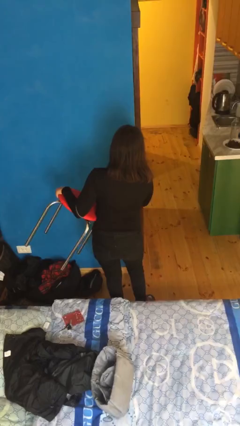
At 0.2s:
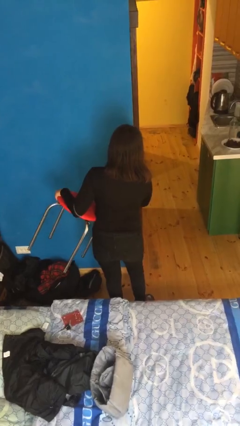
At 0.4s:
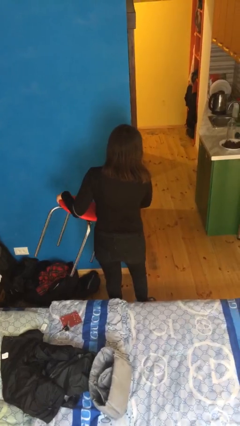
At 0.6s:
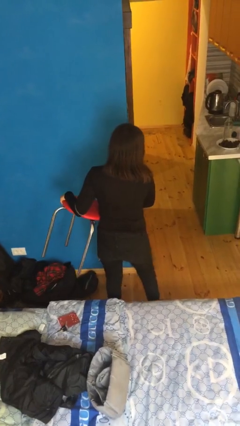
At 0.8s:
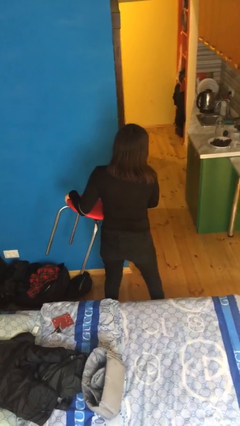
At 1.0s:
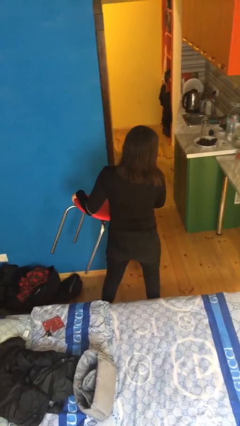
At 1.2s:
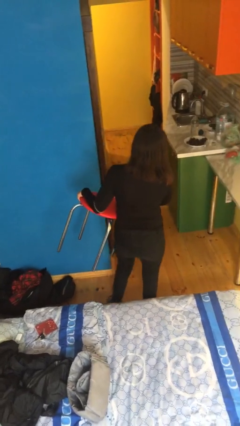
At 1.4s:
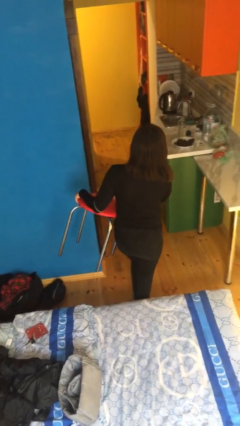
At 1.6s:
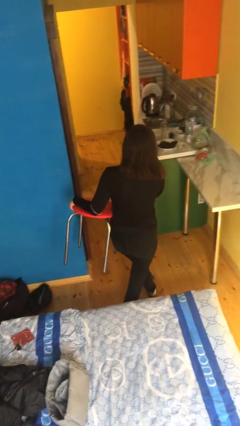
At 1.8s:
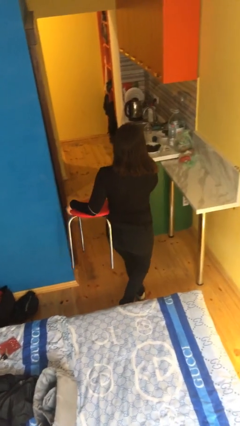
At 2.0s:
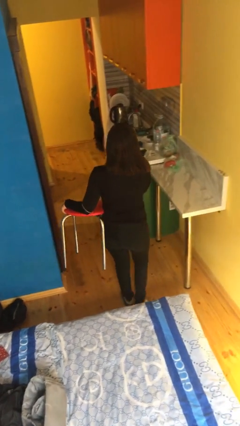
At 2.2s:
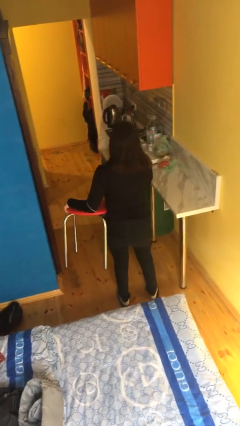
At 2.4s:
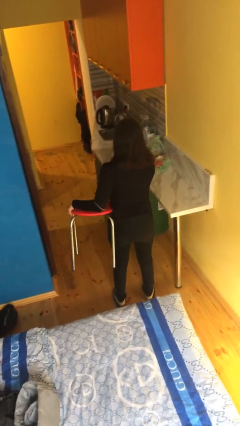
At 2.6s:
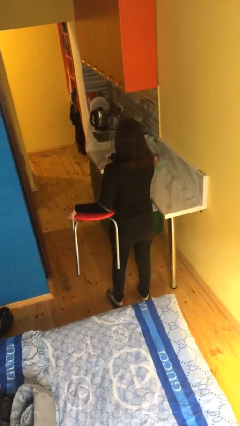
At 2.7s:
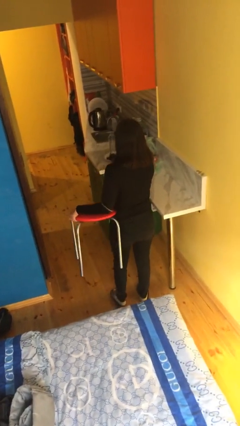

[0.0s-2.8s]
person carries furniture

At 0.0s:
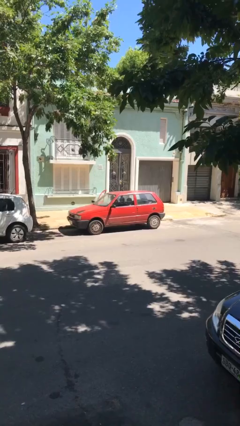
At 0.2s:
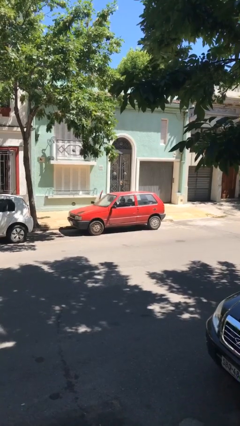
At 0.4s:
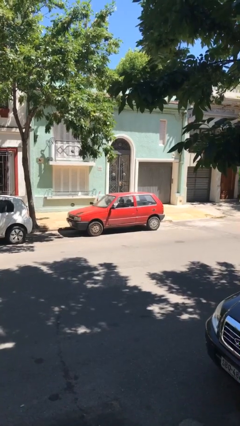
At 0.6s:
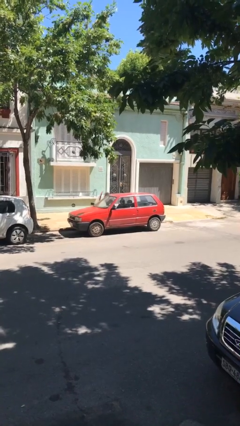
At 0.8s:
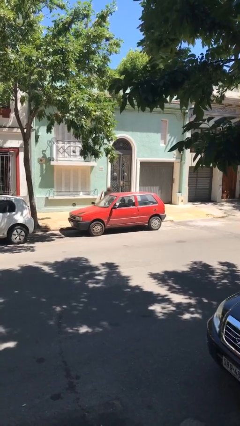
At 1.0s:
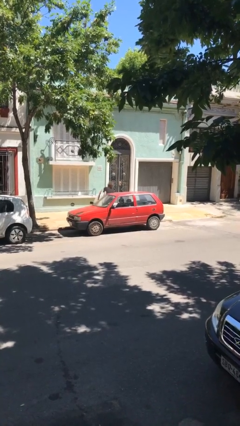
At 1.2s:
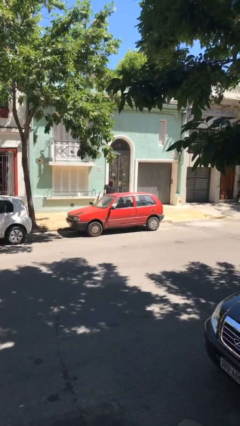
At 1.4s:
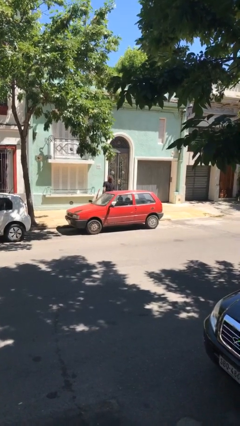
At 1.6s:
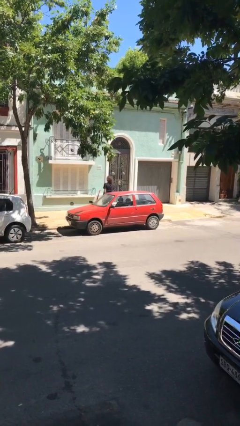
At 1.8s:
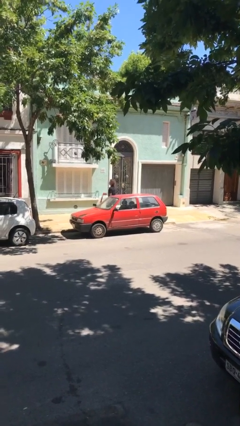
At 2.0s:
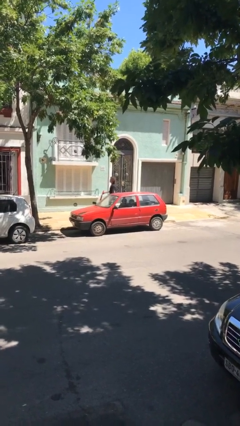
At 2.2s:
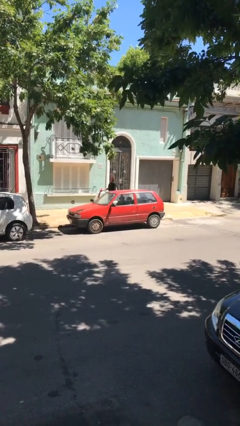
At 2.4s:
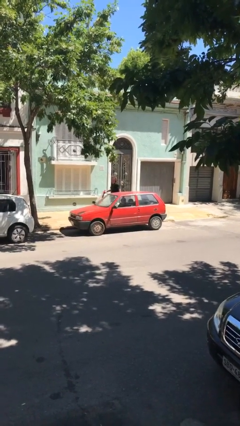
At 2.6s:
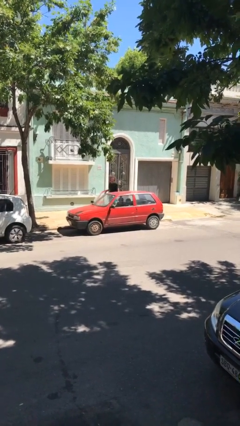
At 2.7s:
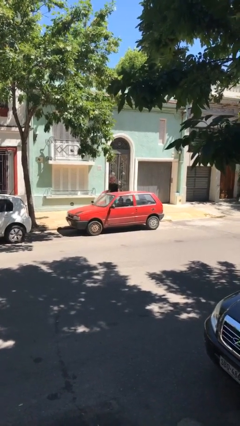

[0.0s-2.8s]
car drops off person

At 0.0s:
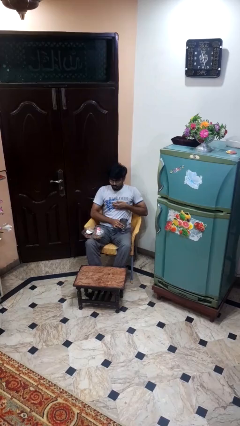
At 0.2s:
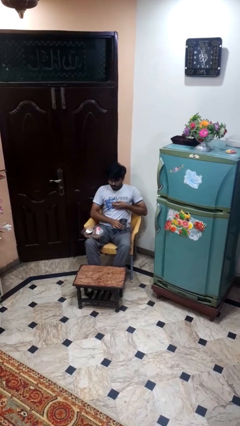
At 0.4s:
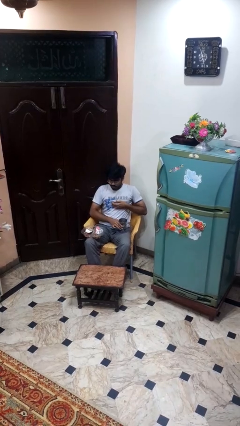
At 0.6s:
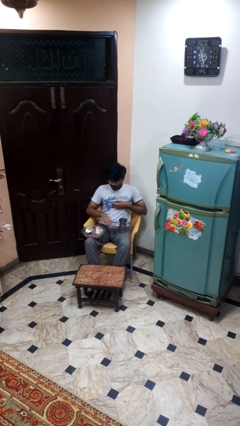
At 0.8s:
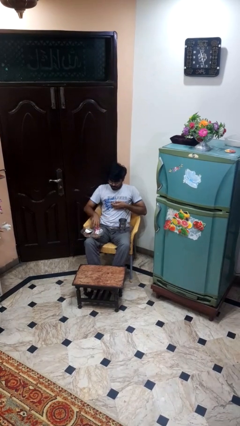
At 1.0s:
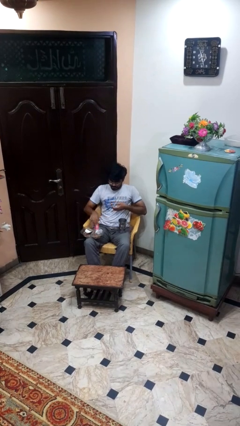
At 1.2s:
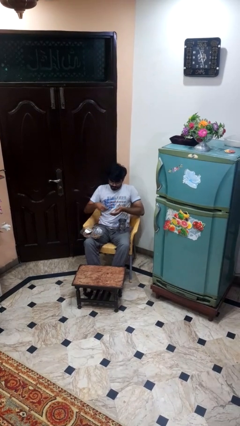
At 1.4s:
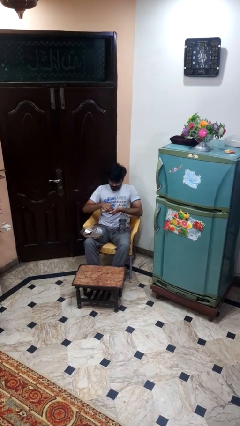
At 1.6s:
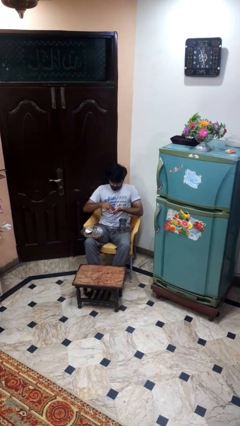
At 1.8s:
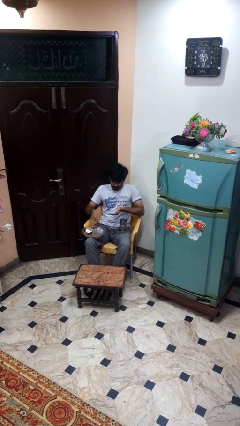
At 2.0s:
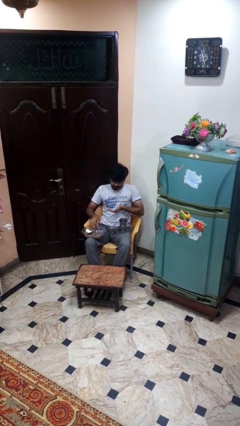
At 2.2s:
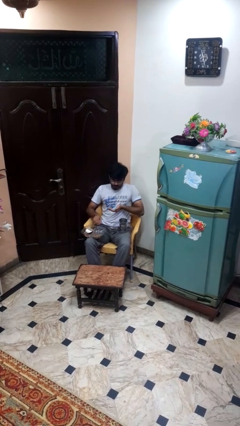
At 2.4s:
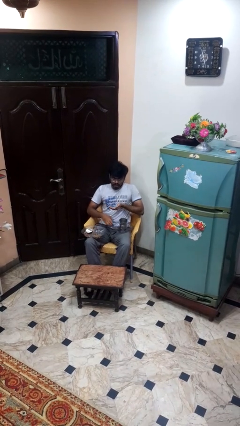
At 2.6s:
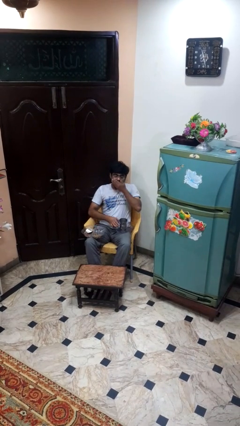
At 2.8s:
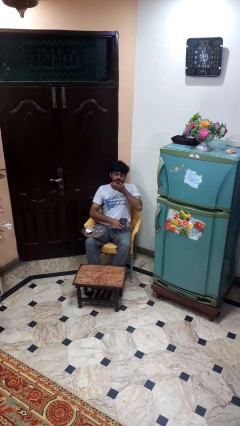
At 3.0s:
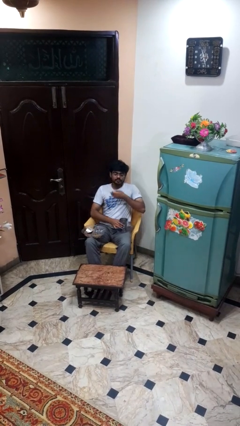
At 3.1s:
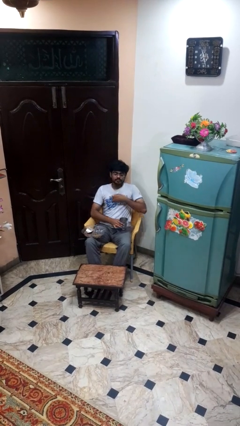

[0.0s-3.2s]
person takes medicine pills

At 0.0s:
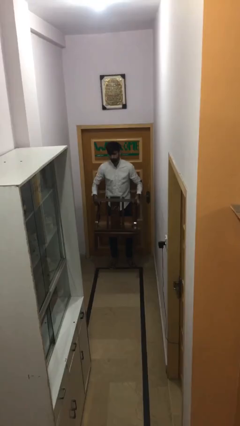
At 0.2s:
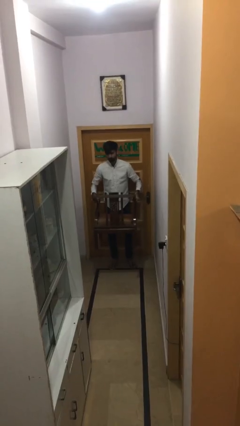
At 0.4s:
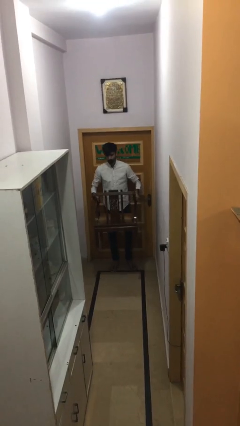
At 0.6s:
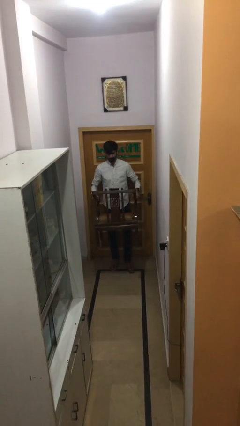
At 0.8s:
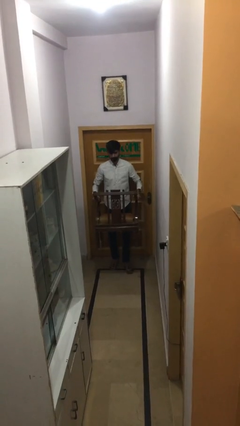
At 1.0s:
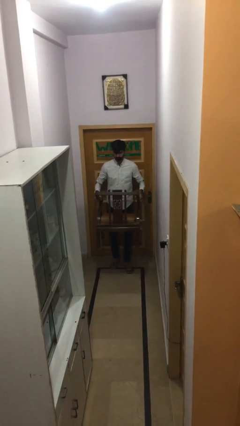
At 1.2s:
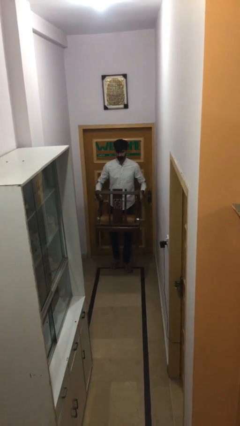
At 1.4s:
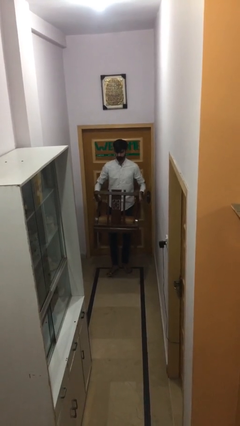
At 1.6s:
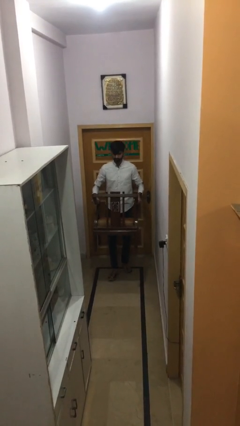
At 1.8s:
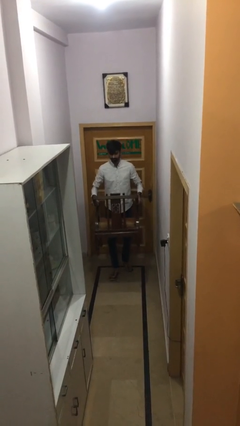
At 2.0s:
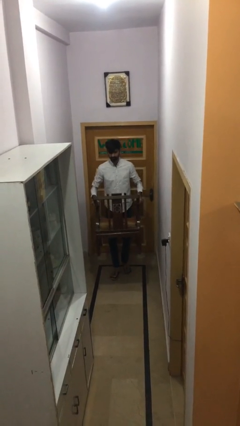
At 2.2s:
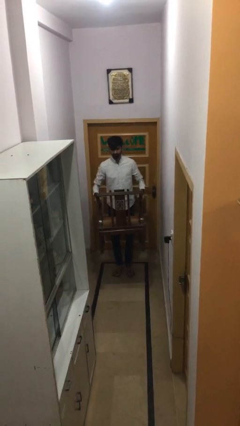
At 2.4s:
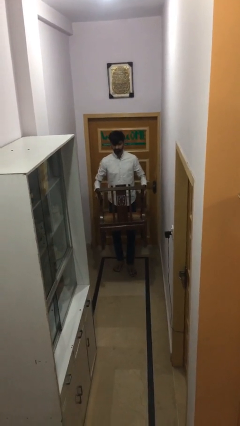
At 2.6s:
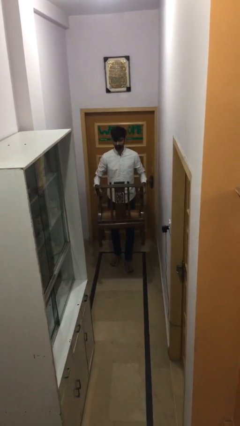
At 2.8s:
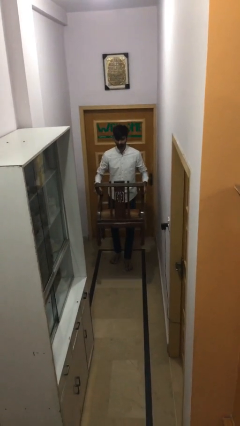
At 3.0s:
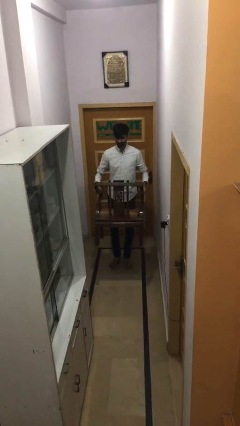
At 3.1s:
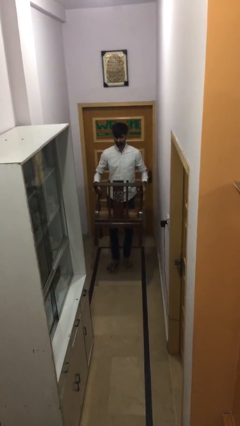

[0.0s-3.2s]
person carries heavy object

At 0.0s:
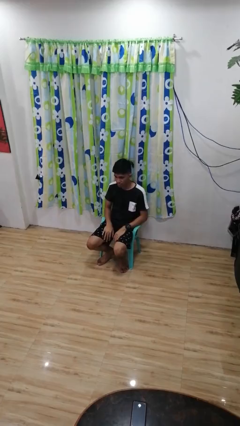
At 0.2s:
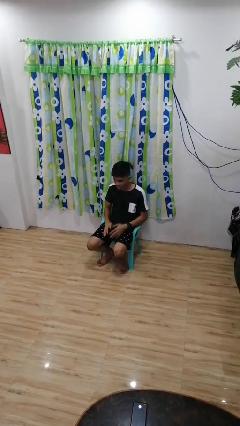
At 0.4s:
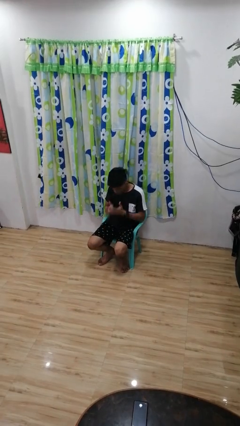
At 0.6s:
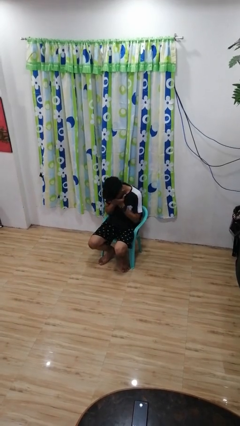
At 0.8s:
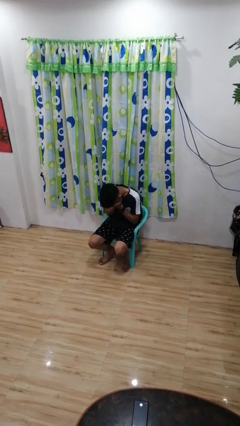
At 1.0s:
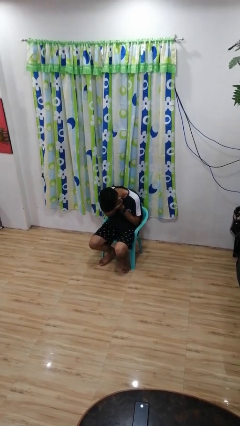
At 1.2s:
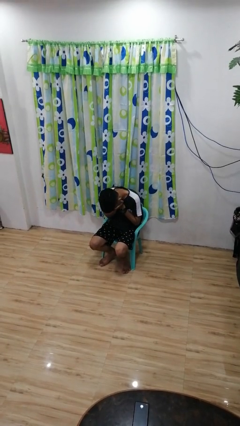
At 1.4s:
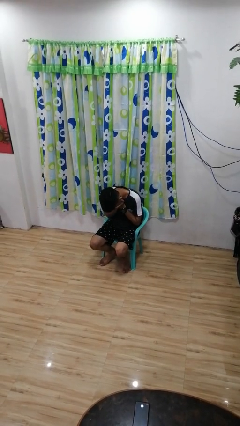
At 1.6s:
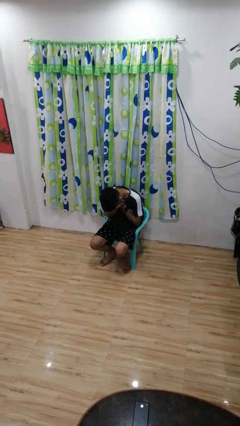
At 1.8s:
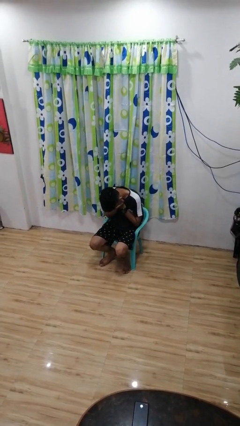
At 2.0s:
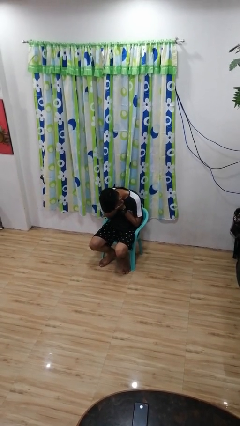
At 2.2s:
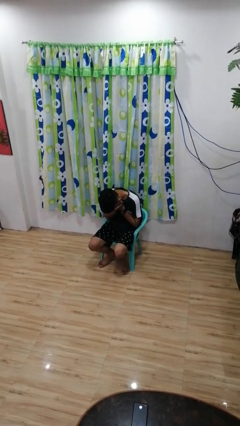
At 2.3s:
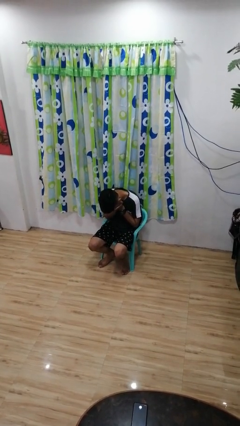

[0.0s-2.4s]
person covers face with hands

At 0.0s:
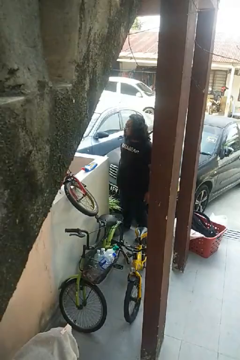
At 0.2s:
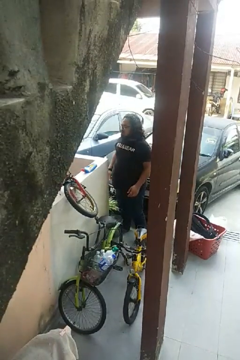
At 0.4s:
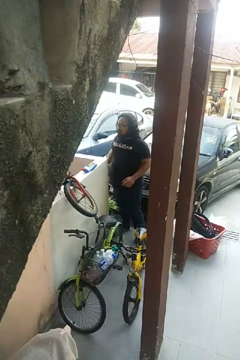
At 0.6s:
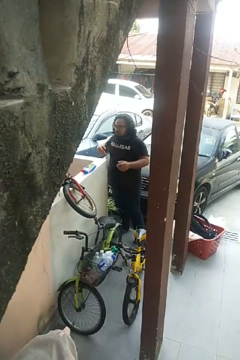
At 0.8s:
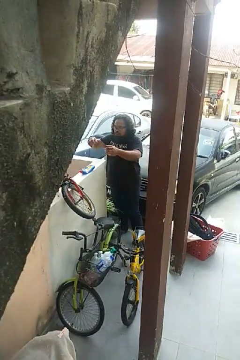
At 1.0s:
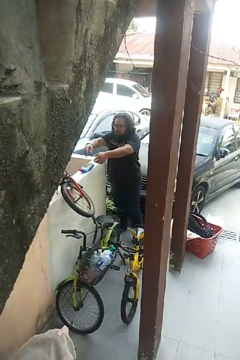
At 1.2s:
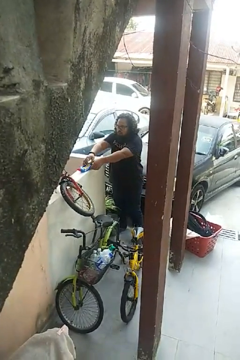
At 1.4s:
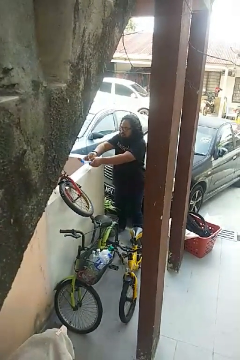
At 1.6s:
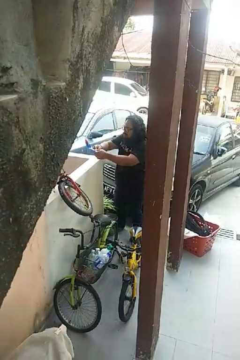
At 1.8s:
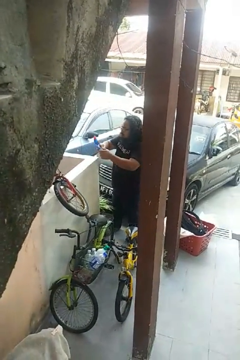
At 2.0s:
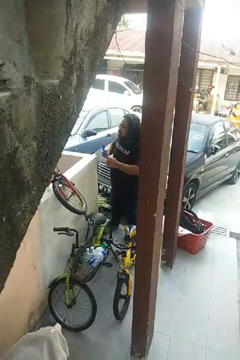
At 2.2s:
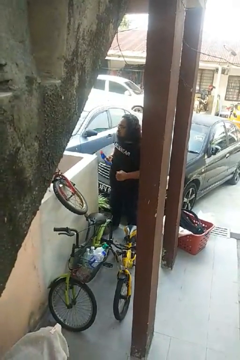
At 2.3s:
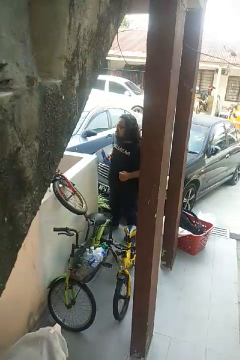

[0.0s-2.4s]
person picks up object from countertop

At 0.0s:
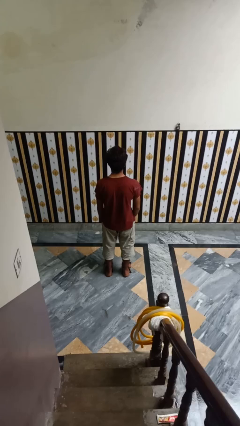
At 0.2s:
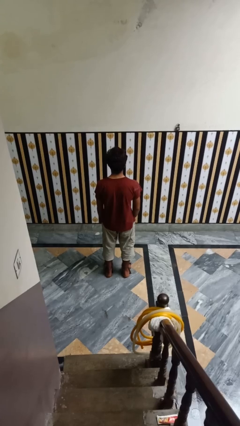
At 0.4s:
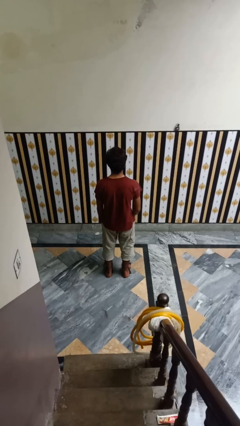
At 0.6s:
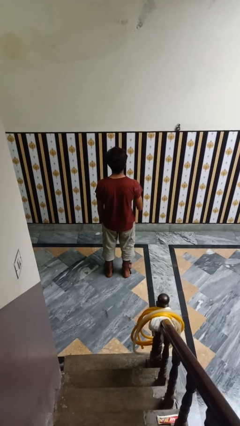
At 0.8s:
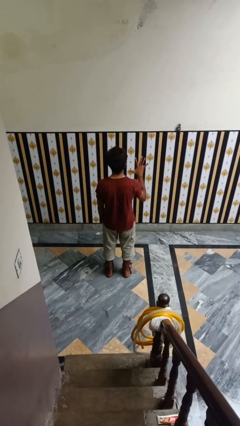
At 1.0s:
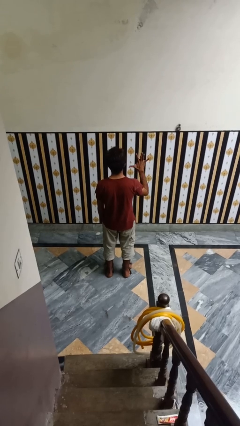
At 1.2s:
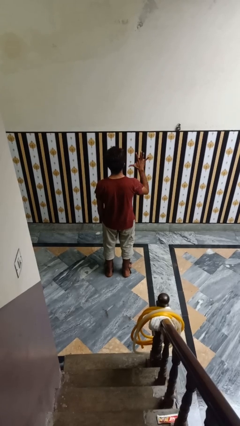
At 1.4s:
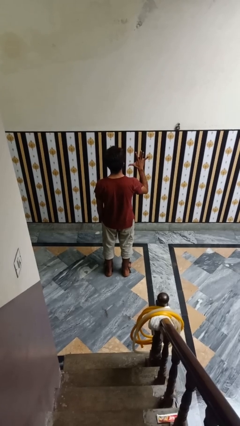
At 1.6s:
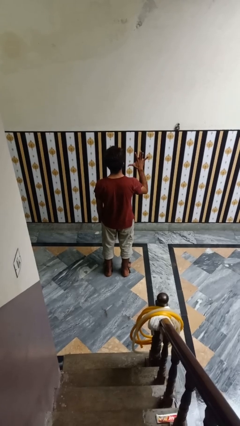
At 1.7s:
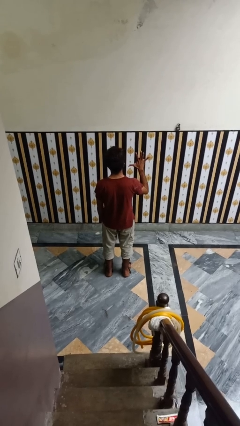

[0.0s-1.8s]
person gestures number five
